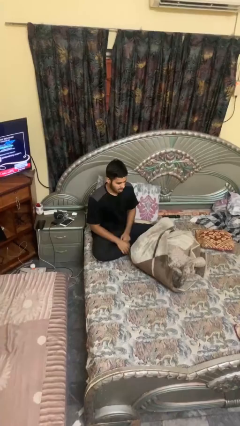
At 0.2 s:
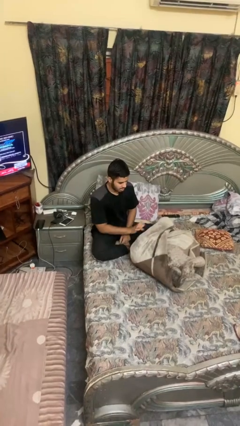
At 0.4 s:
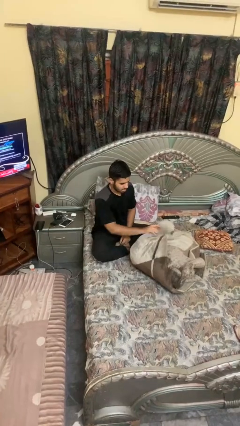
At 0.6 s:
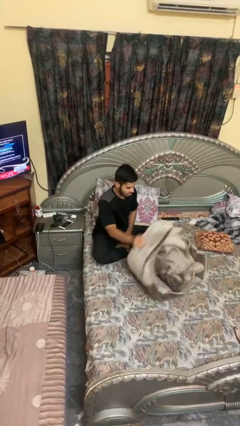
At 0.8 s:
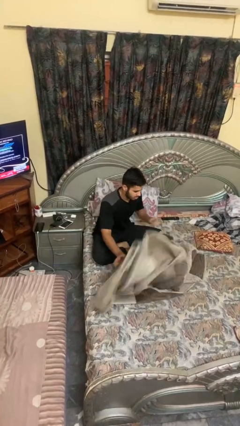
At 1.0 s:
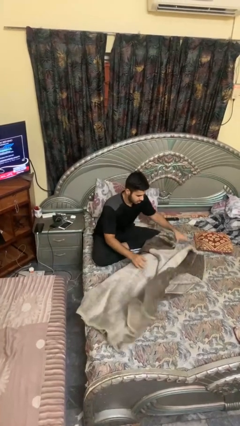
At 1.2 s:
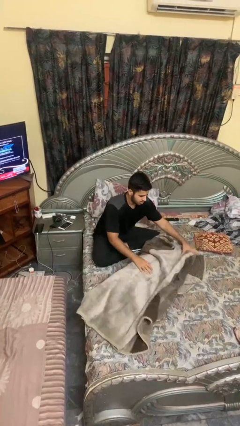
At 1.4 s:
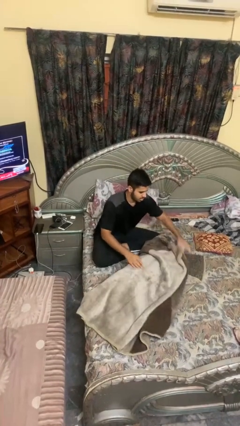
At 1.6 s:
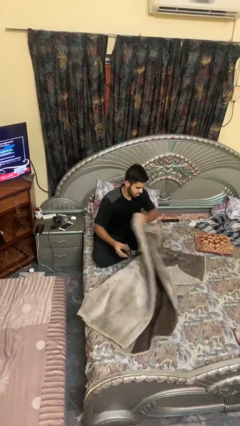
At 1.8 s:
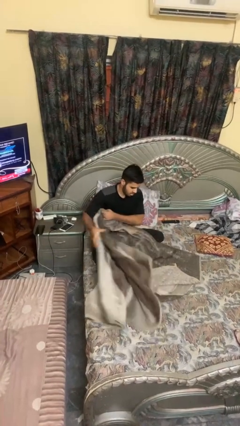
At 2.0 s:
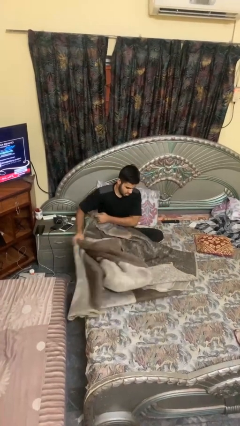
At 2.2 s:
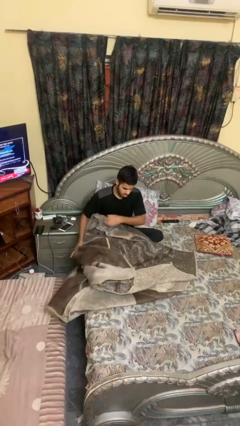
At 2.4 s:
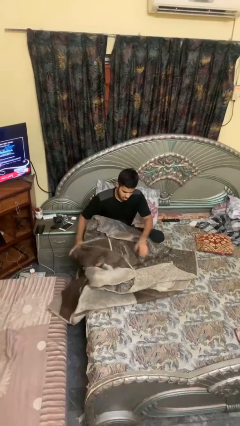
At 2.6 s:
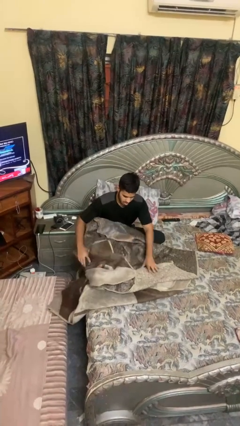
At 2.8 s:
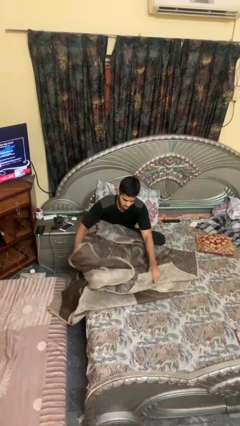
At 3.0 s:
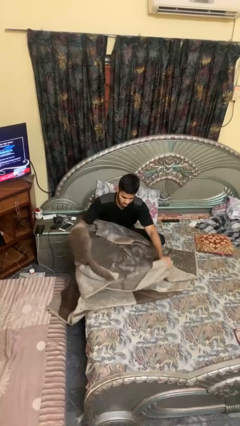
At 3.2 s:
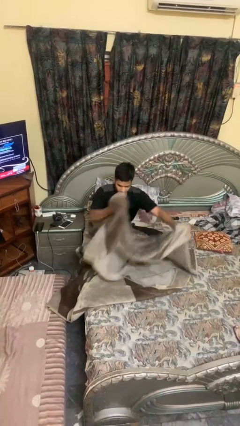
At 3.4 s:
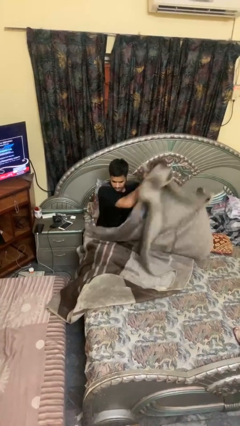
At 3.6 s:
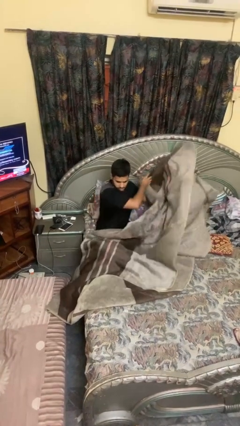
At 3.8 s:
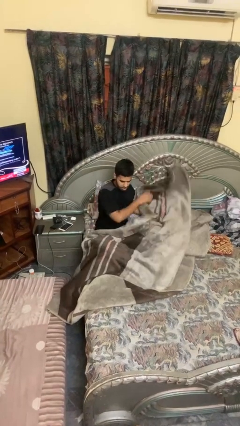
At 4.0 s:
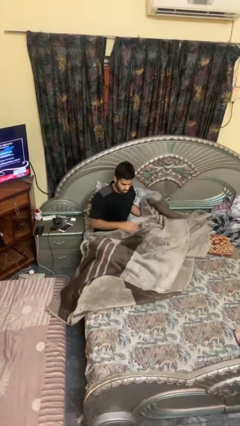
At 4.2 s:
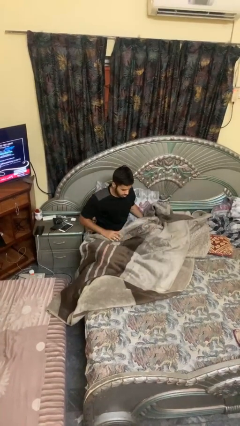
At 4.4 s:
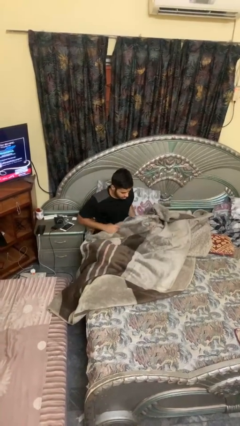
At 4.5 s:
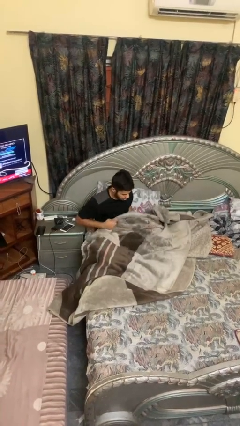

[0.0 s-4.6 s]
person unfolds blanket

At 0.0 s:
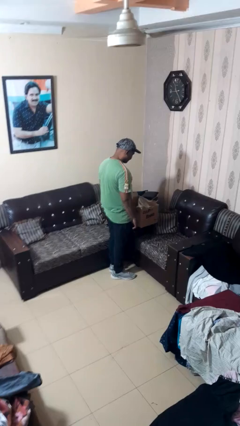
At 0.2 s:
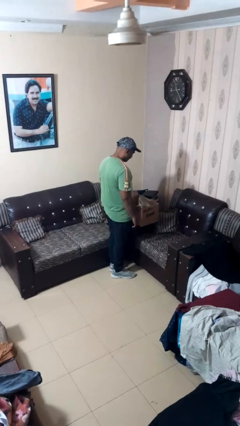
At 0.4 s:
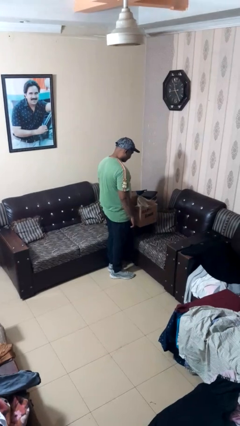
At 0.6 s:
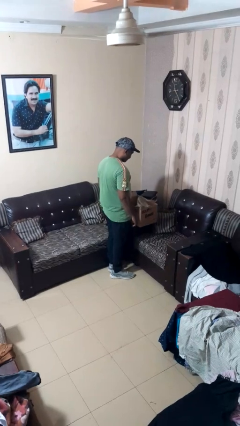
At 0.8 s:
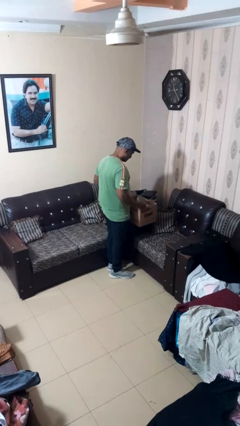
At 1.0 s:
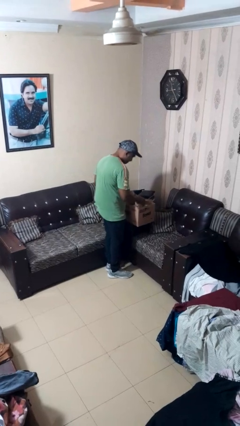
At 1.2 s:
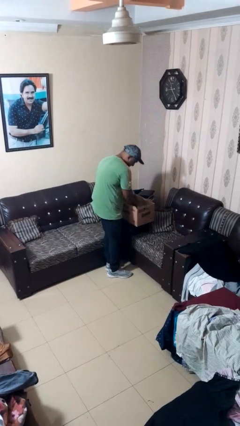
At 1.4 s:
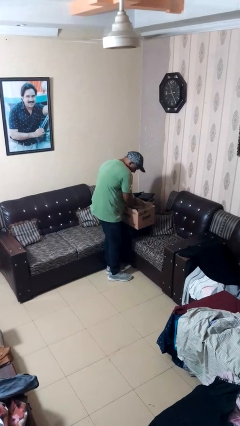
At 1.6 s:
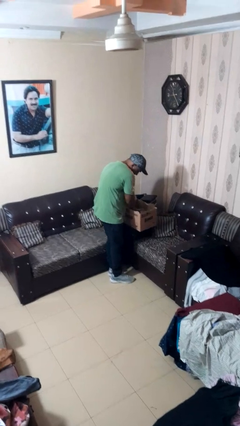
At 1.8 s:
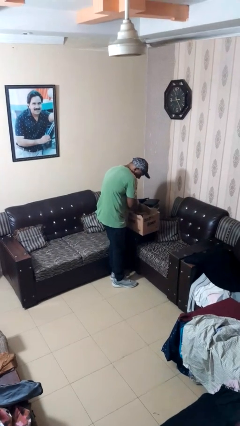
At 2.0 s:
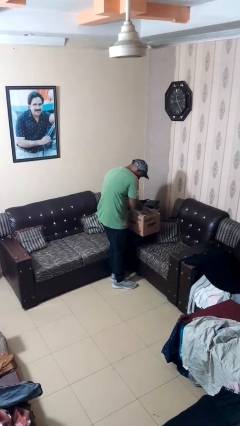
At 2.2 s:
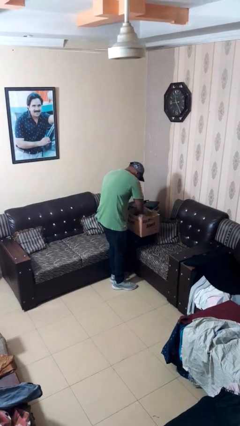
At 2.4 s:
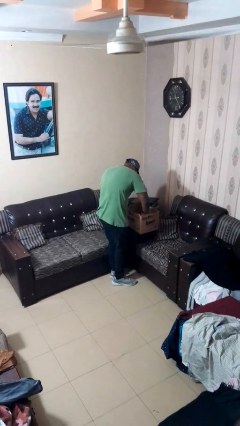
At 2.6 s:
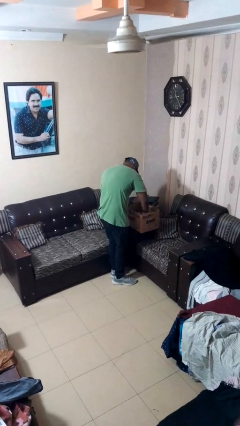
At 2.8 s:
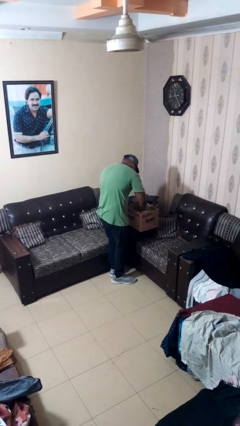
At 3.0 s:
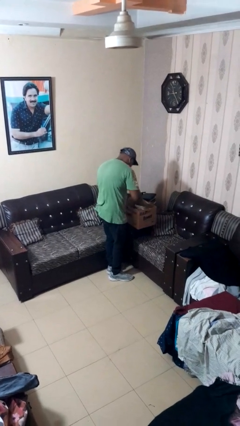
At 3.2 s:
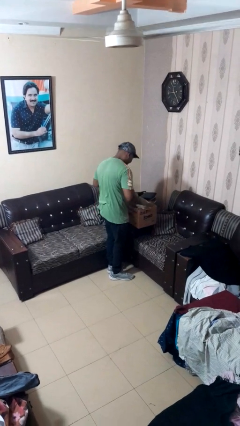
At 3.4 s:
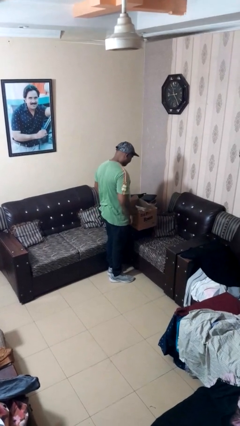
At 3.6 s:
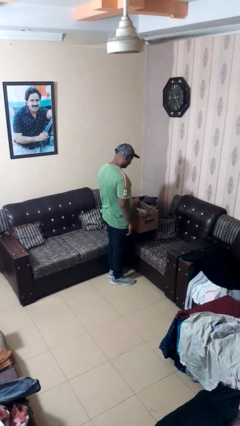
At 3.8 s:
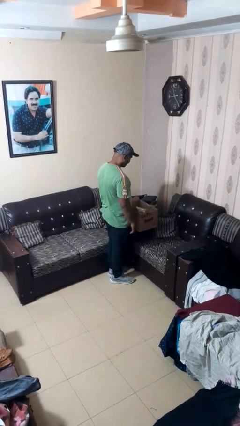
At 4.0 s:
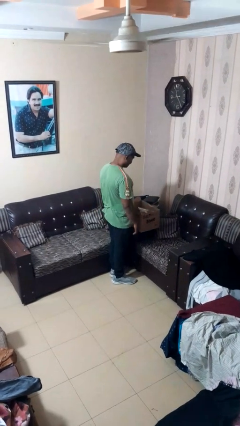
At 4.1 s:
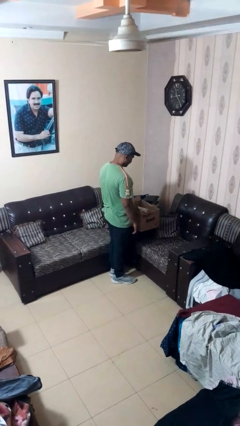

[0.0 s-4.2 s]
person searches in box

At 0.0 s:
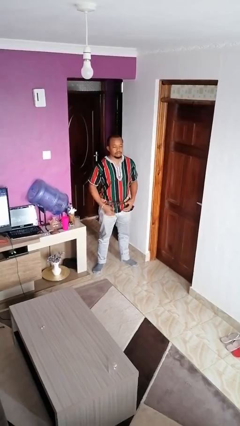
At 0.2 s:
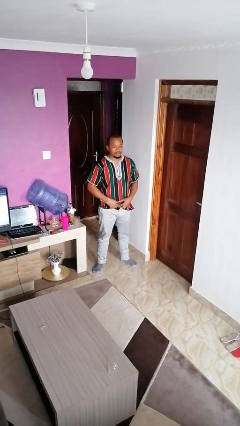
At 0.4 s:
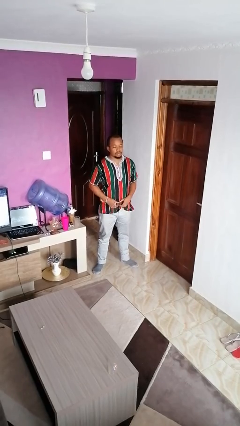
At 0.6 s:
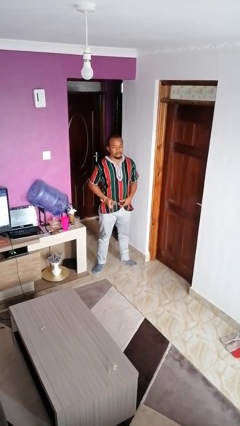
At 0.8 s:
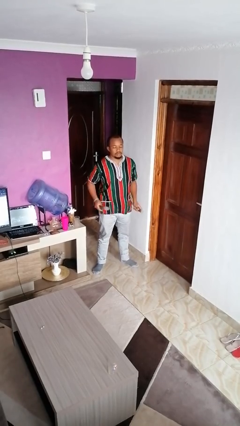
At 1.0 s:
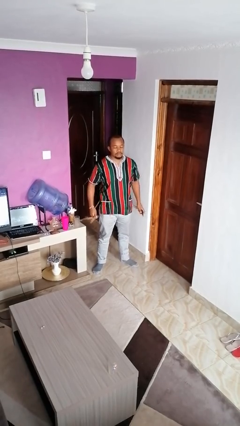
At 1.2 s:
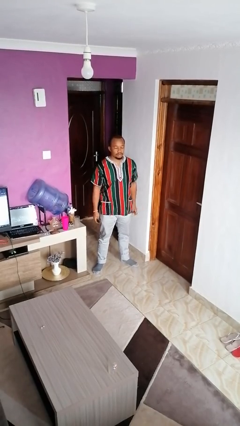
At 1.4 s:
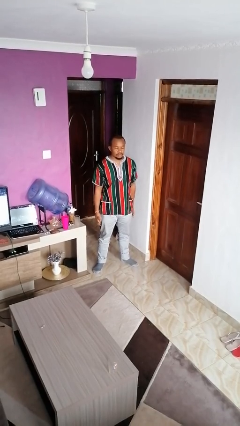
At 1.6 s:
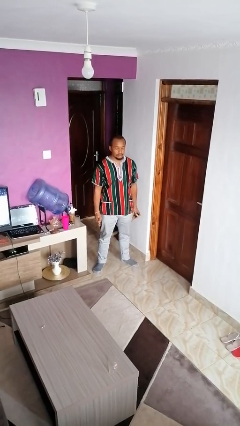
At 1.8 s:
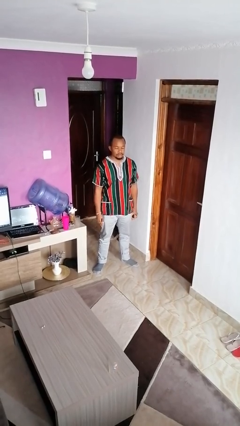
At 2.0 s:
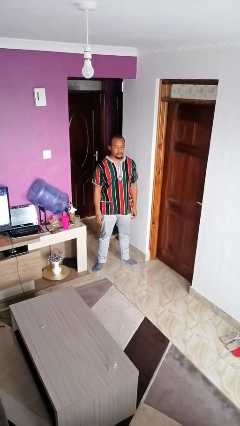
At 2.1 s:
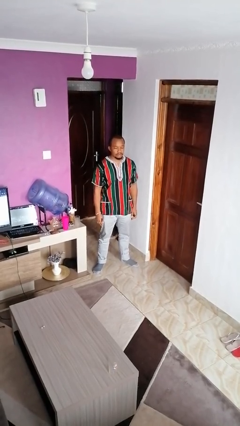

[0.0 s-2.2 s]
person takes off belt

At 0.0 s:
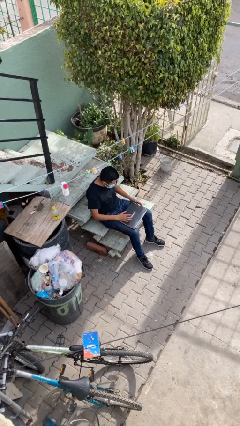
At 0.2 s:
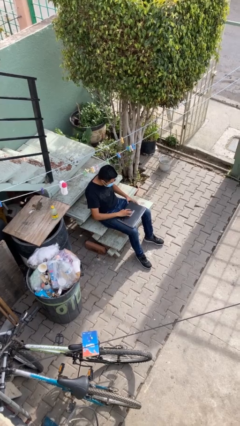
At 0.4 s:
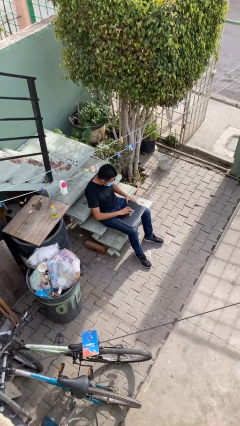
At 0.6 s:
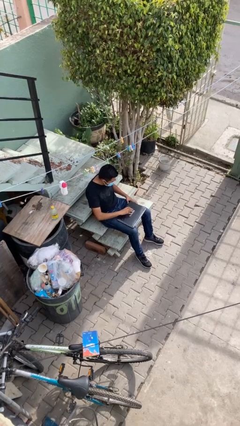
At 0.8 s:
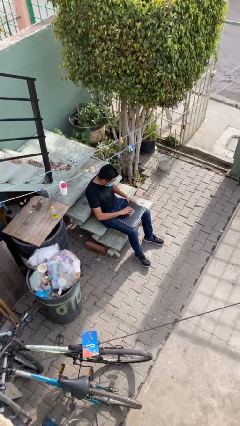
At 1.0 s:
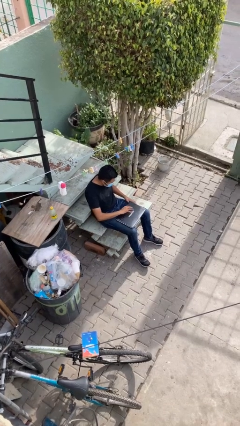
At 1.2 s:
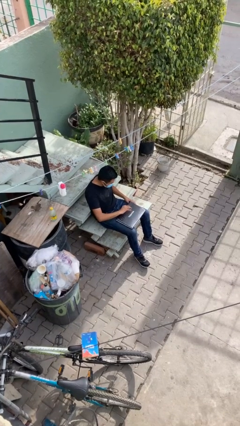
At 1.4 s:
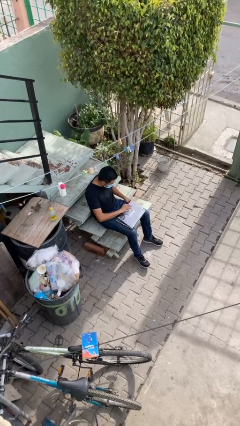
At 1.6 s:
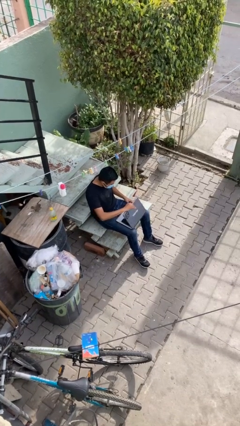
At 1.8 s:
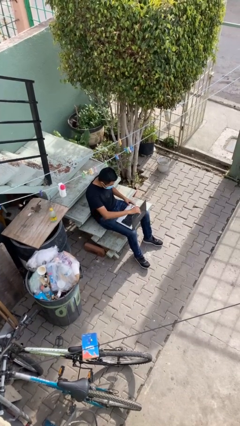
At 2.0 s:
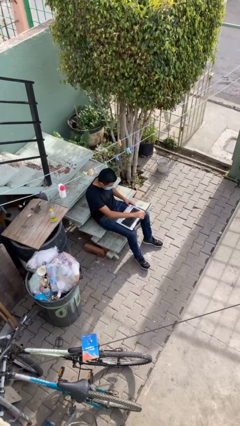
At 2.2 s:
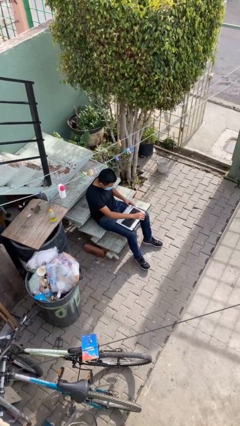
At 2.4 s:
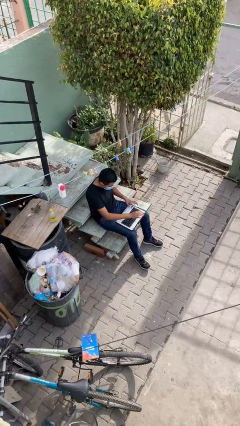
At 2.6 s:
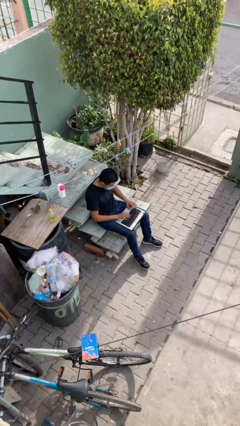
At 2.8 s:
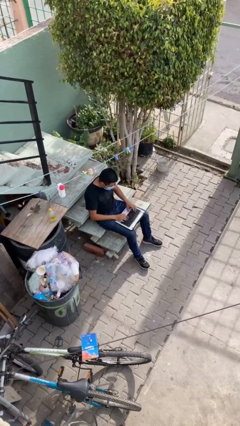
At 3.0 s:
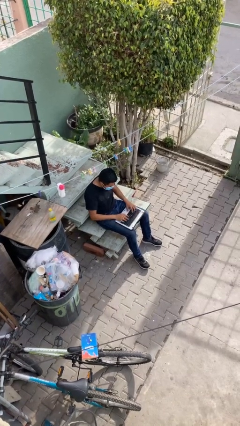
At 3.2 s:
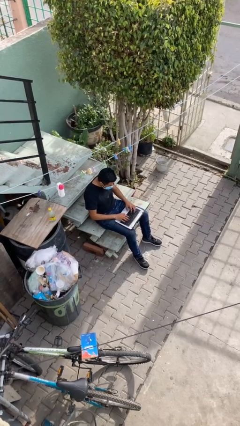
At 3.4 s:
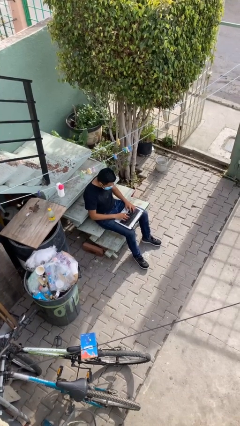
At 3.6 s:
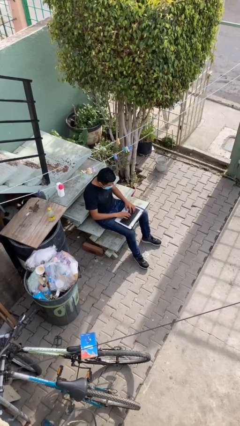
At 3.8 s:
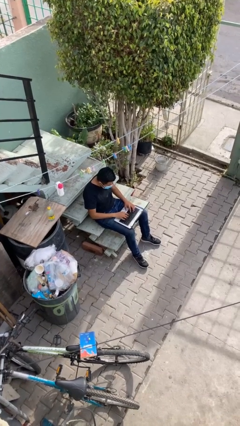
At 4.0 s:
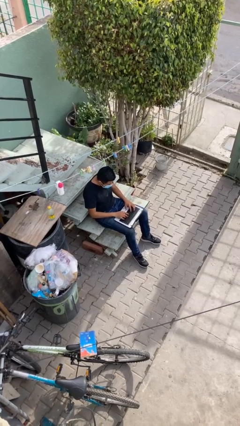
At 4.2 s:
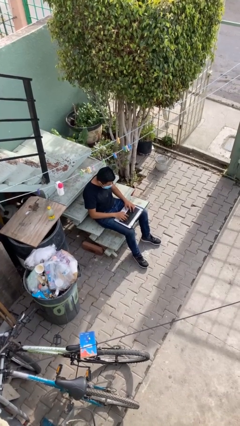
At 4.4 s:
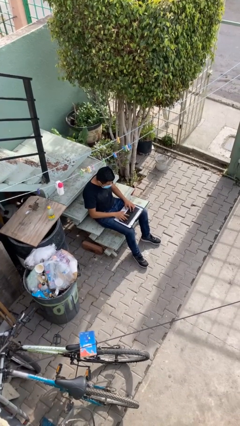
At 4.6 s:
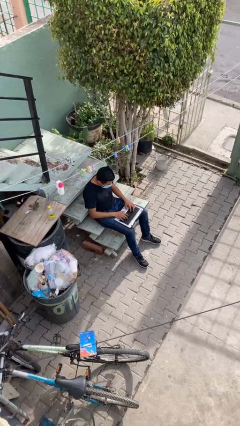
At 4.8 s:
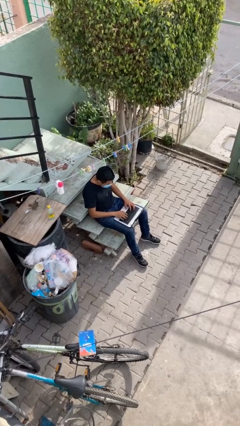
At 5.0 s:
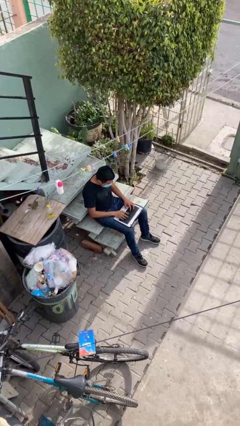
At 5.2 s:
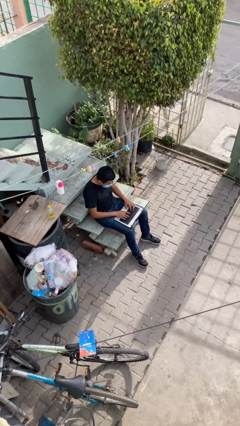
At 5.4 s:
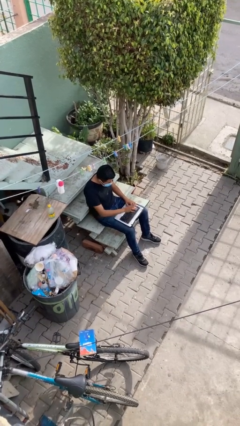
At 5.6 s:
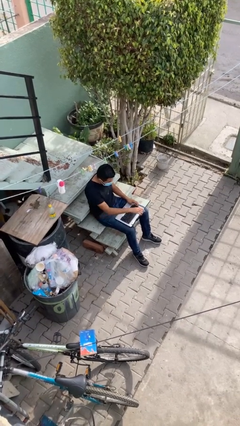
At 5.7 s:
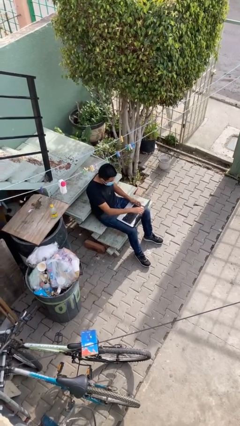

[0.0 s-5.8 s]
person interacts with laptop

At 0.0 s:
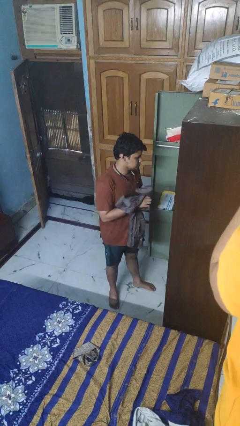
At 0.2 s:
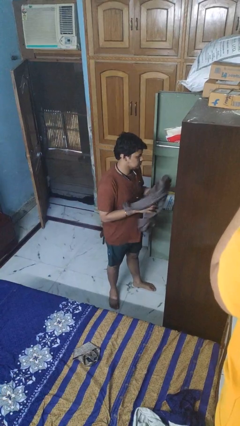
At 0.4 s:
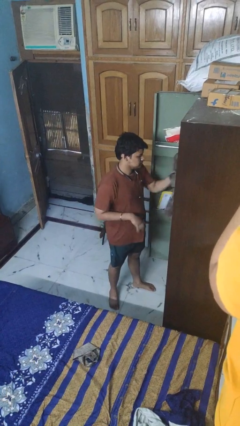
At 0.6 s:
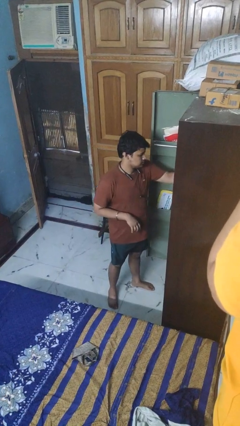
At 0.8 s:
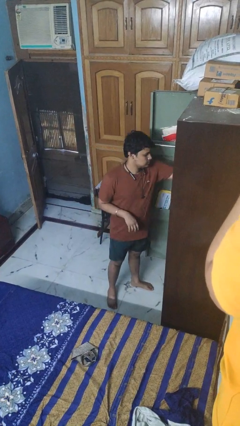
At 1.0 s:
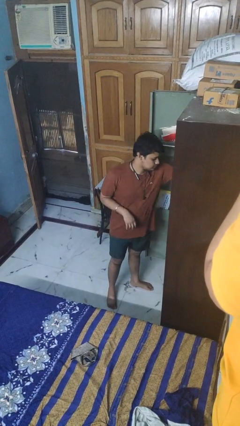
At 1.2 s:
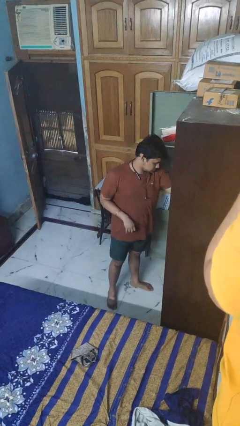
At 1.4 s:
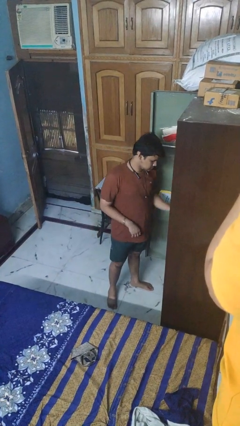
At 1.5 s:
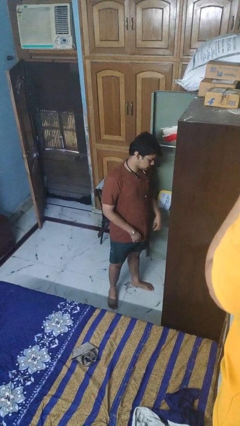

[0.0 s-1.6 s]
person puts clothes into dresser
